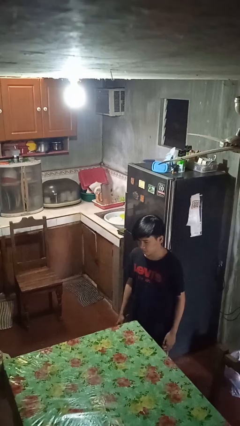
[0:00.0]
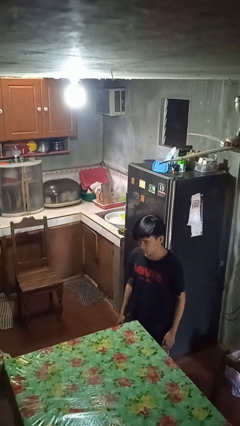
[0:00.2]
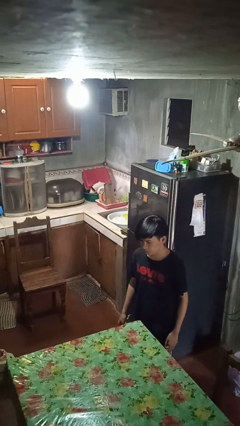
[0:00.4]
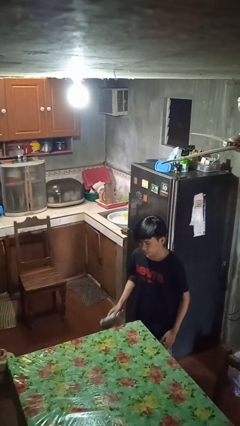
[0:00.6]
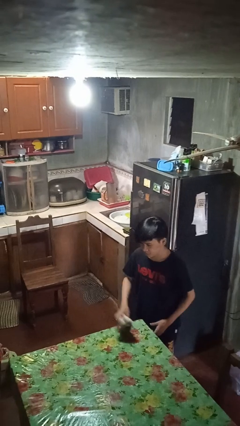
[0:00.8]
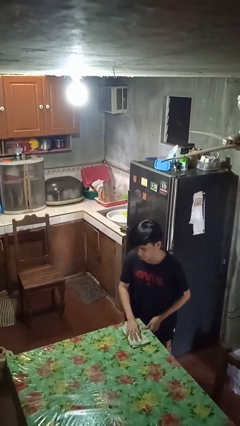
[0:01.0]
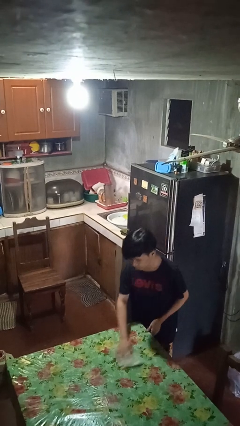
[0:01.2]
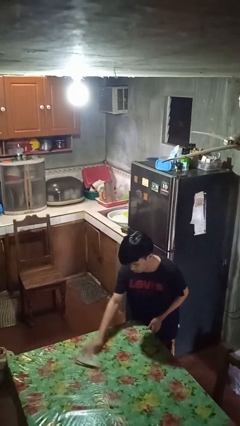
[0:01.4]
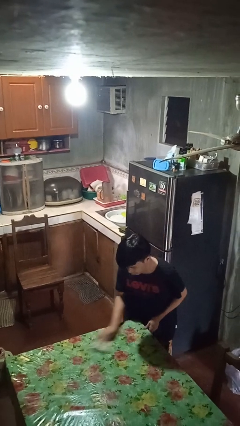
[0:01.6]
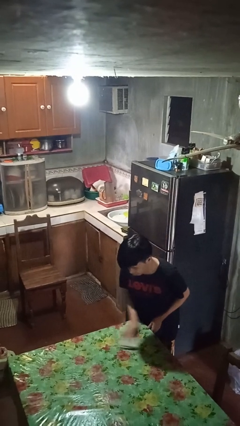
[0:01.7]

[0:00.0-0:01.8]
person cleans table with rag

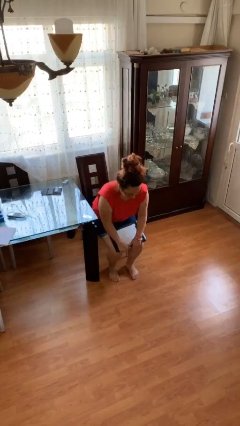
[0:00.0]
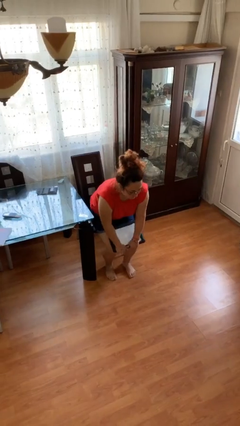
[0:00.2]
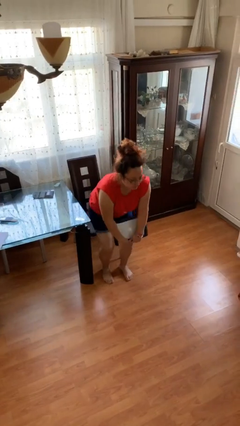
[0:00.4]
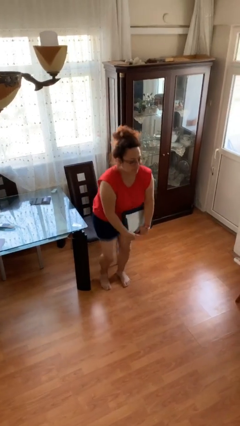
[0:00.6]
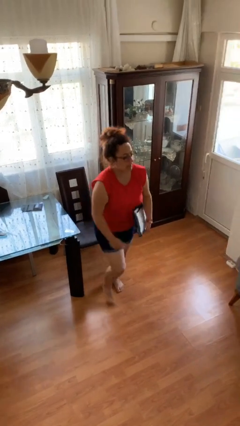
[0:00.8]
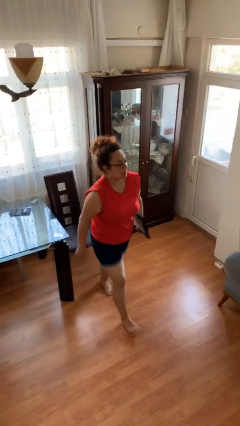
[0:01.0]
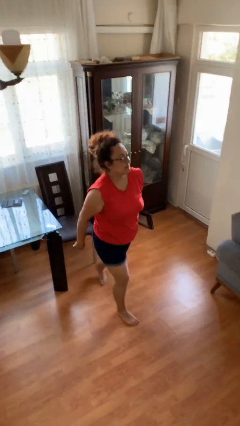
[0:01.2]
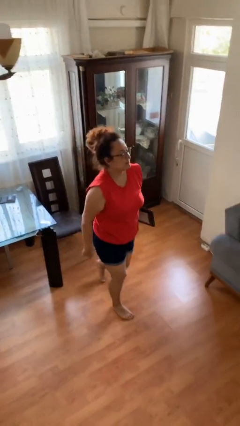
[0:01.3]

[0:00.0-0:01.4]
person stands up

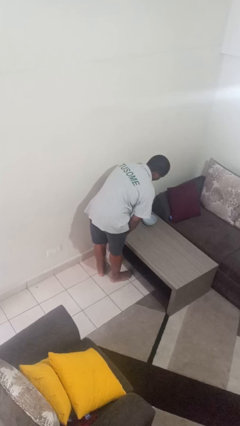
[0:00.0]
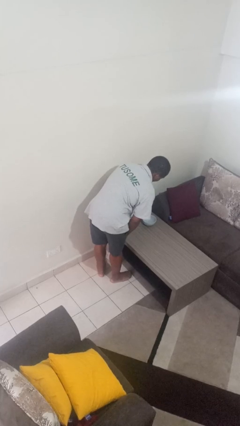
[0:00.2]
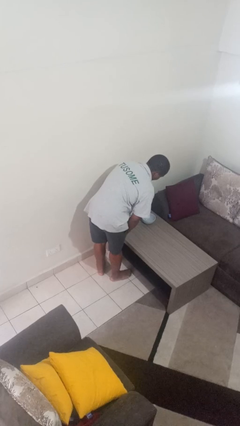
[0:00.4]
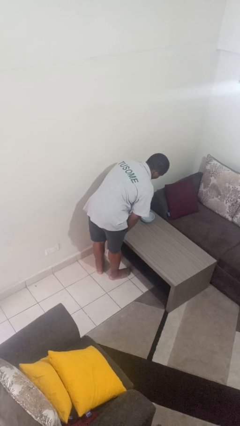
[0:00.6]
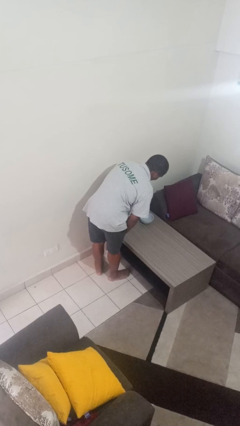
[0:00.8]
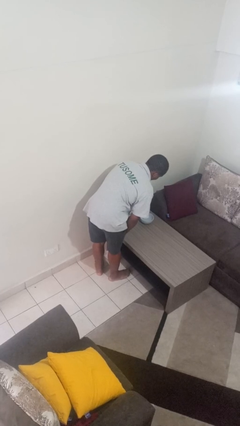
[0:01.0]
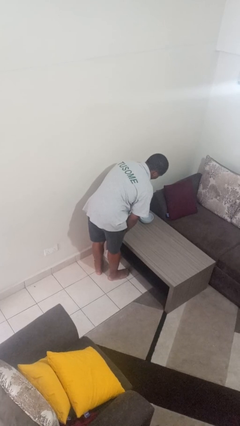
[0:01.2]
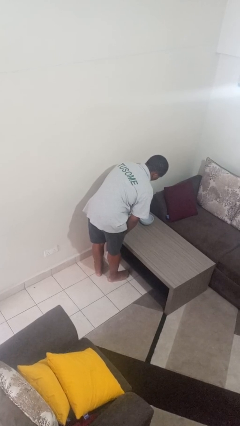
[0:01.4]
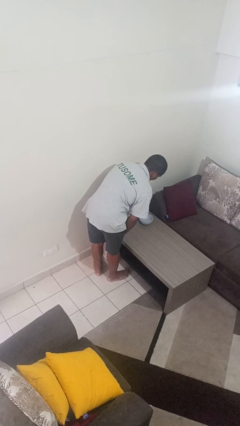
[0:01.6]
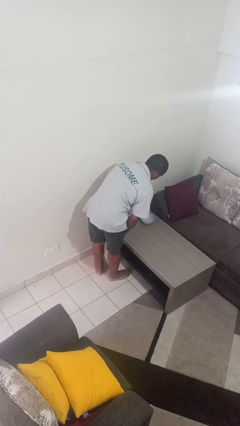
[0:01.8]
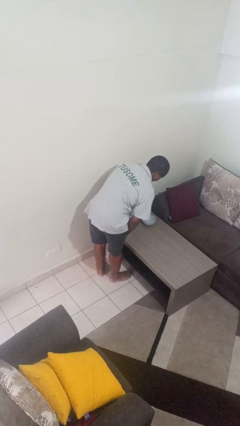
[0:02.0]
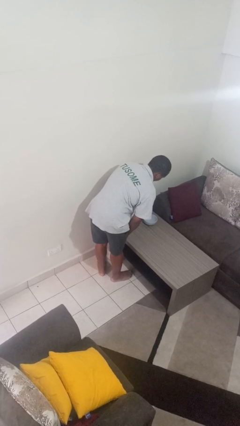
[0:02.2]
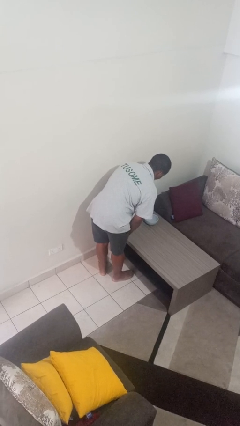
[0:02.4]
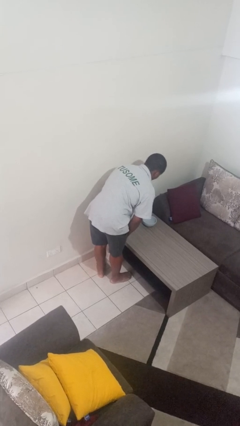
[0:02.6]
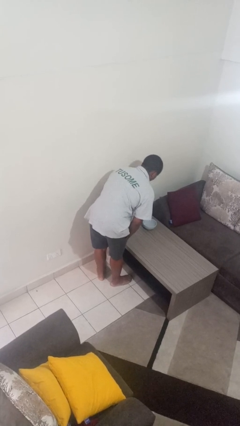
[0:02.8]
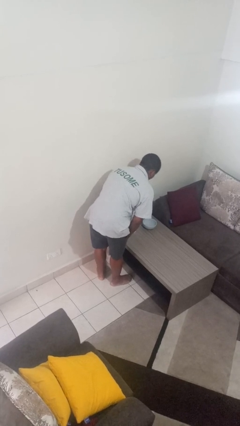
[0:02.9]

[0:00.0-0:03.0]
person pours into bowl

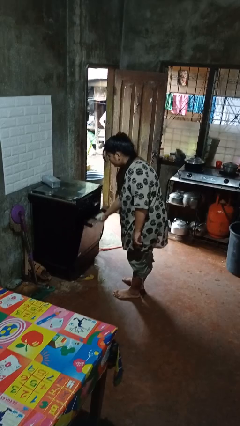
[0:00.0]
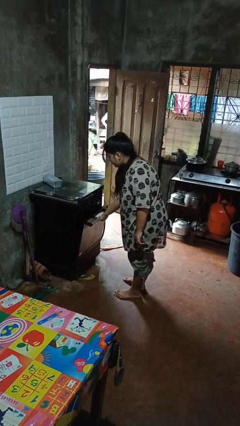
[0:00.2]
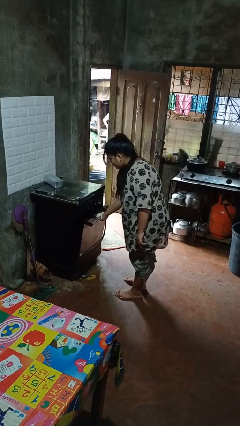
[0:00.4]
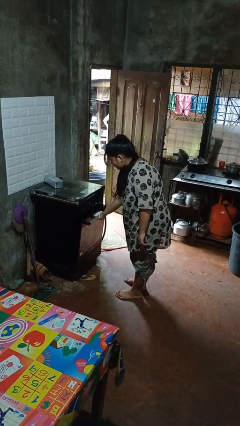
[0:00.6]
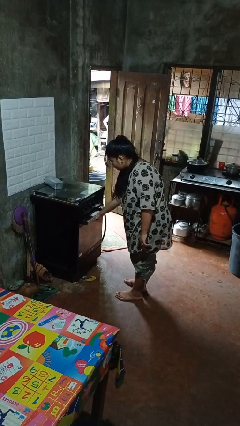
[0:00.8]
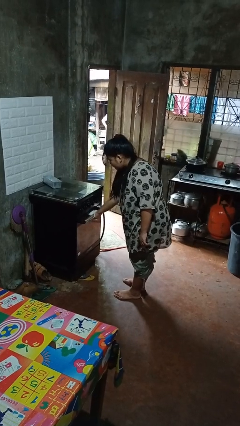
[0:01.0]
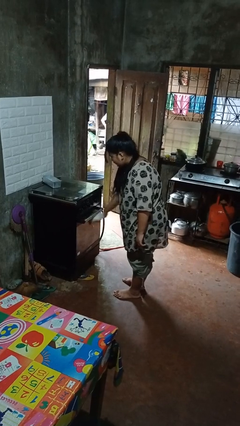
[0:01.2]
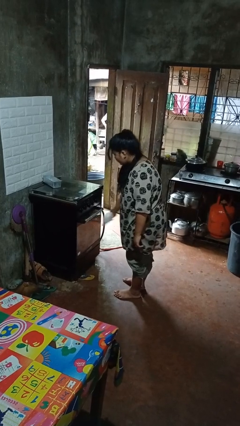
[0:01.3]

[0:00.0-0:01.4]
person closes oven door

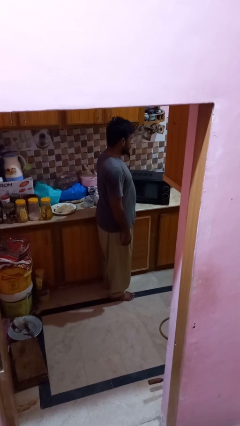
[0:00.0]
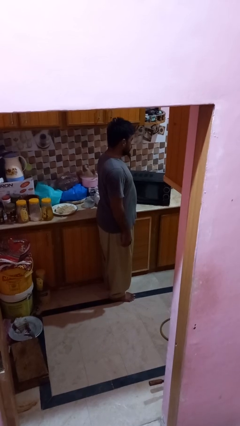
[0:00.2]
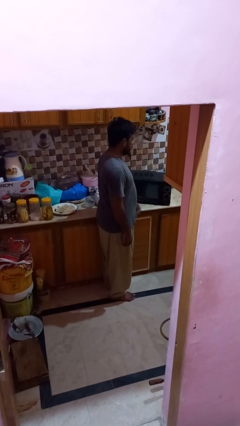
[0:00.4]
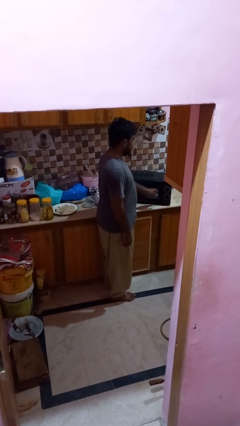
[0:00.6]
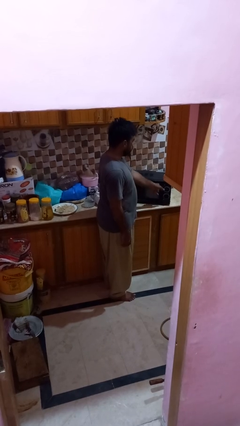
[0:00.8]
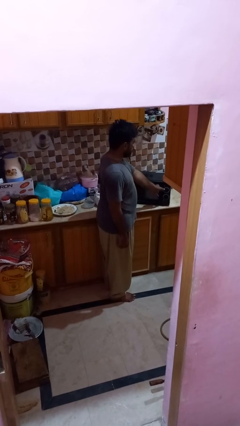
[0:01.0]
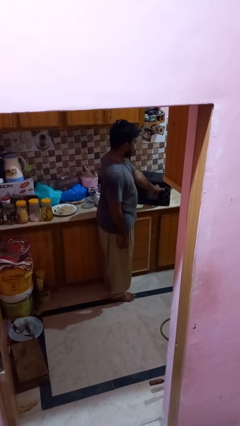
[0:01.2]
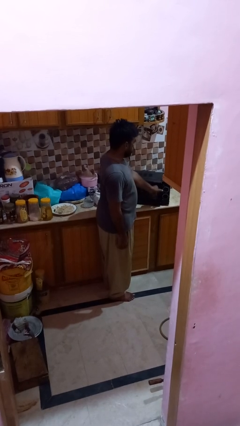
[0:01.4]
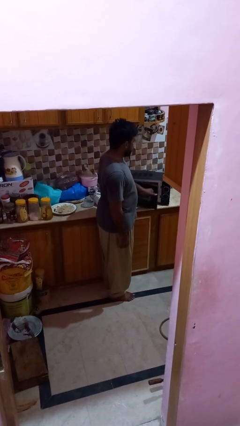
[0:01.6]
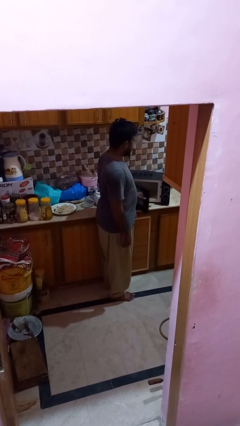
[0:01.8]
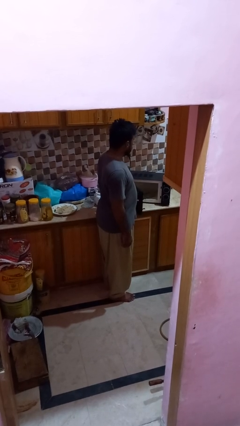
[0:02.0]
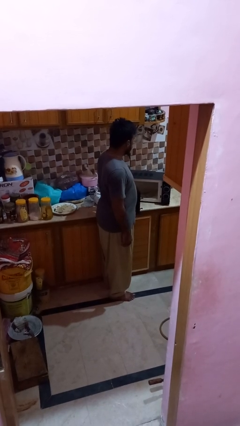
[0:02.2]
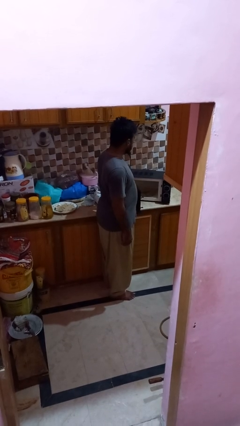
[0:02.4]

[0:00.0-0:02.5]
person opens microwave

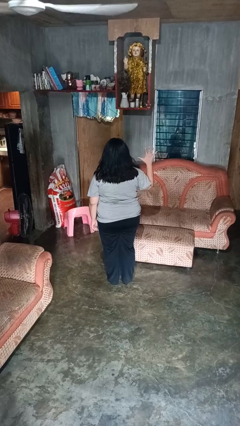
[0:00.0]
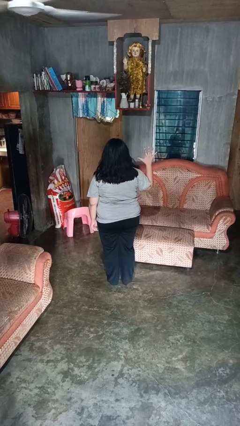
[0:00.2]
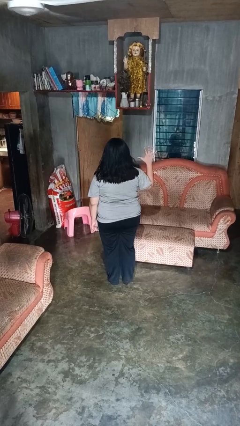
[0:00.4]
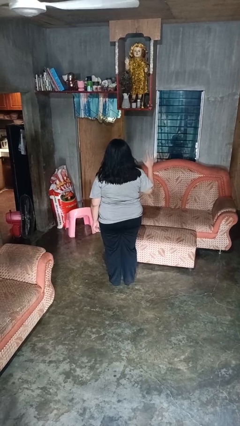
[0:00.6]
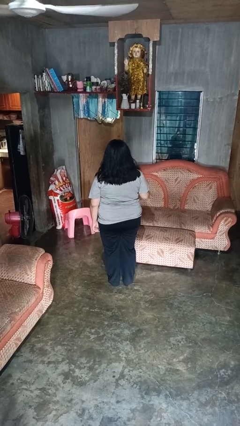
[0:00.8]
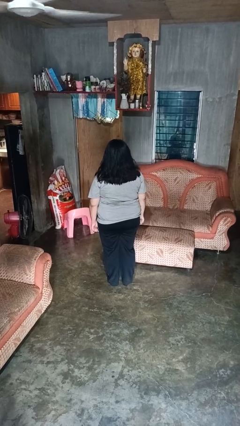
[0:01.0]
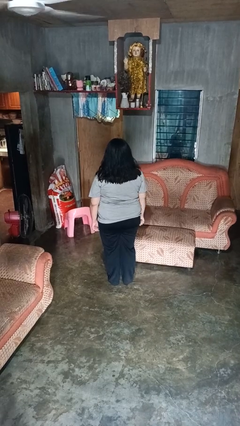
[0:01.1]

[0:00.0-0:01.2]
person gestures number five

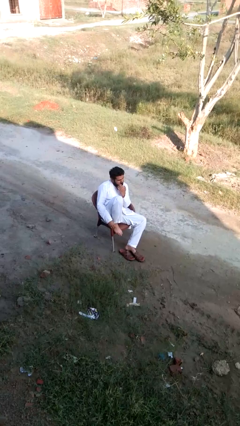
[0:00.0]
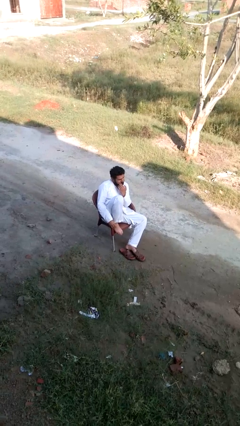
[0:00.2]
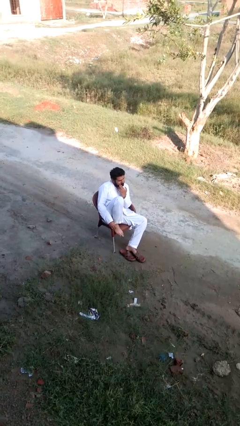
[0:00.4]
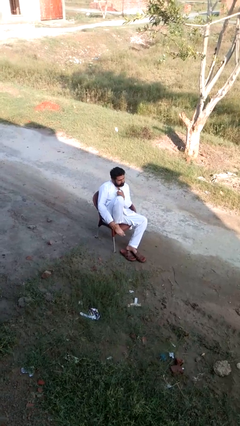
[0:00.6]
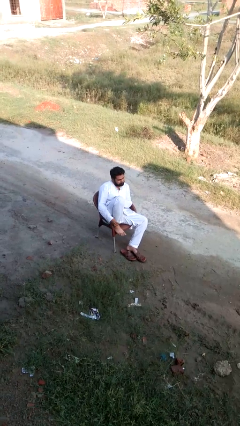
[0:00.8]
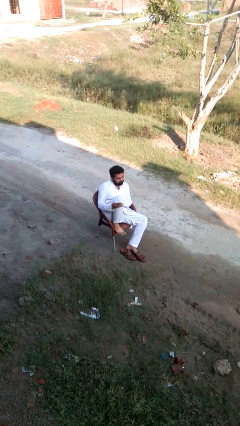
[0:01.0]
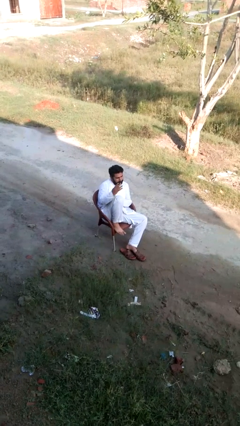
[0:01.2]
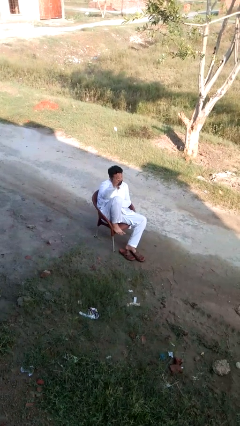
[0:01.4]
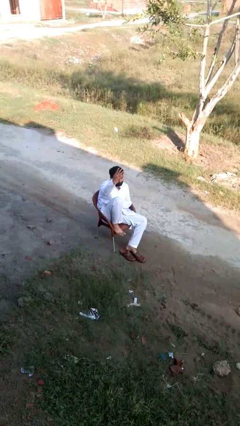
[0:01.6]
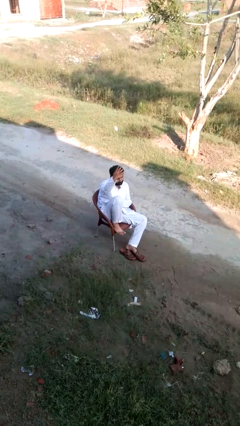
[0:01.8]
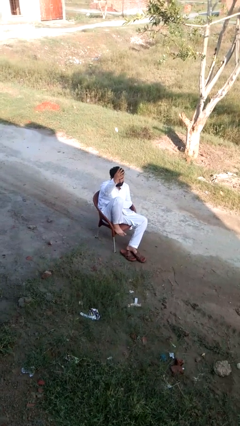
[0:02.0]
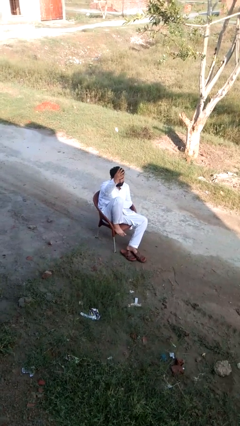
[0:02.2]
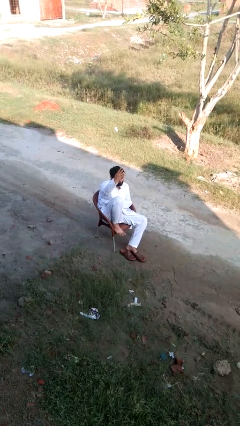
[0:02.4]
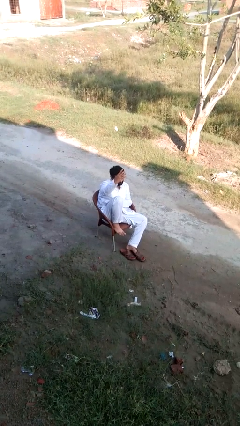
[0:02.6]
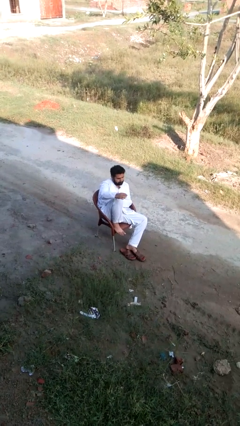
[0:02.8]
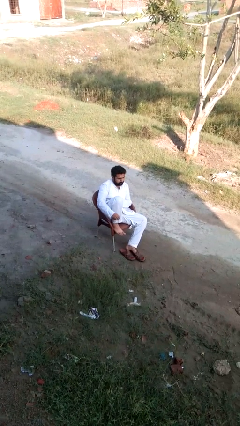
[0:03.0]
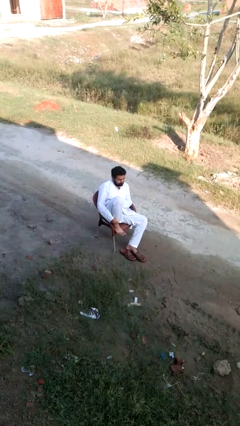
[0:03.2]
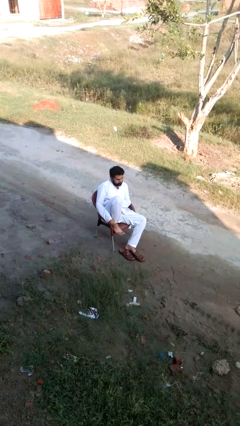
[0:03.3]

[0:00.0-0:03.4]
person gestures number four

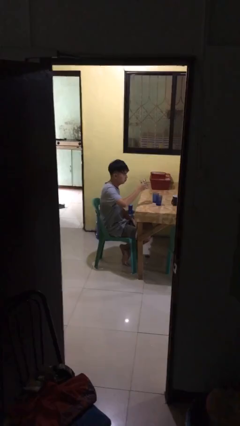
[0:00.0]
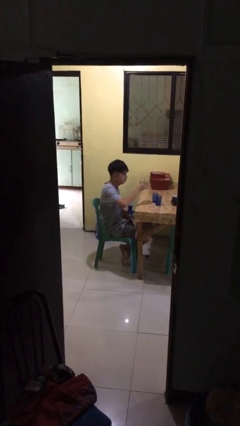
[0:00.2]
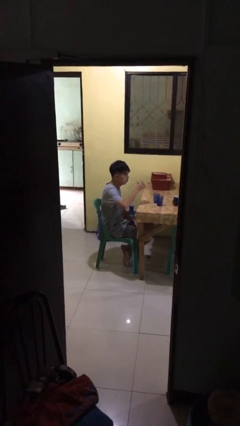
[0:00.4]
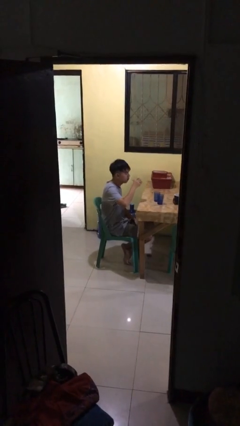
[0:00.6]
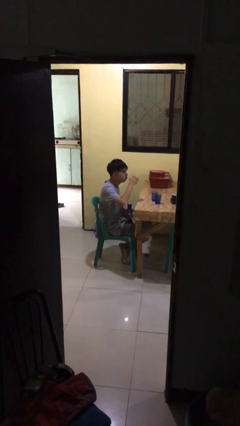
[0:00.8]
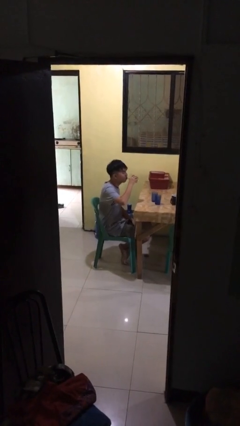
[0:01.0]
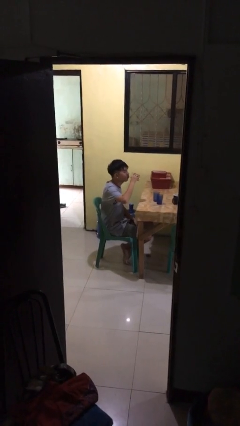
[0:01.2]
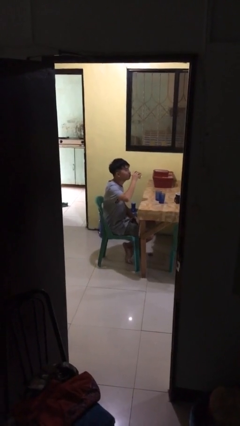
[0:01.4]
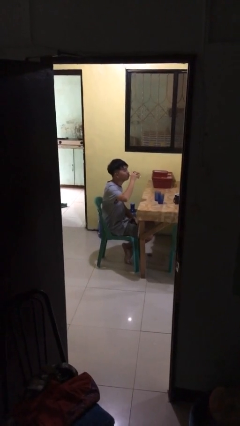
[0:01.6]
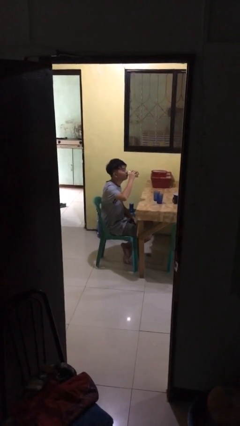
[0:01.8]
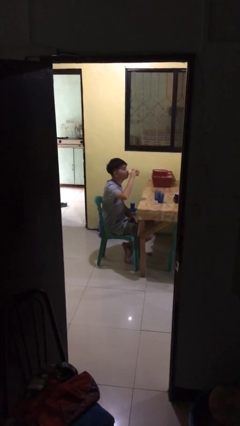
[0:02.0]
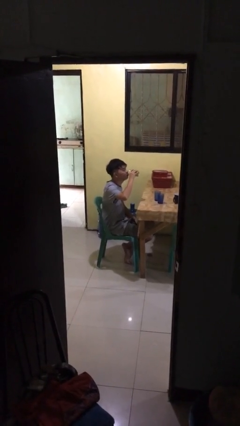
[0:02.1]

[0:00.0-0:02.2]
person drinks from shotglass
